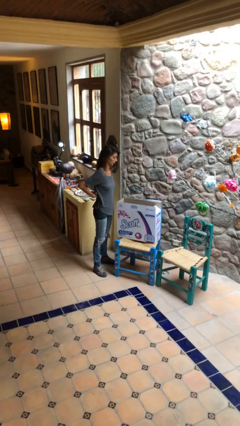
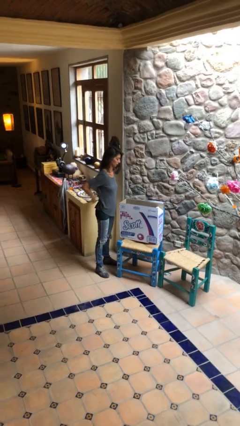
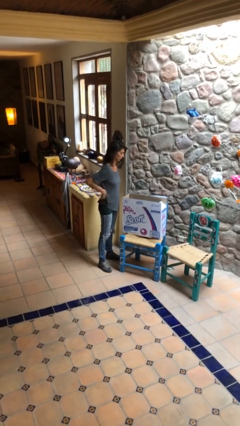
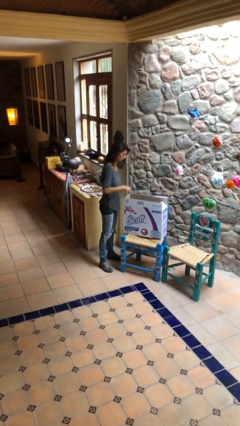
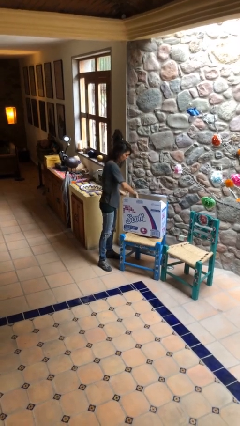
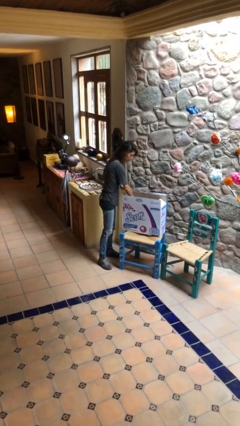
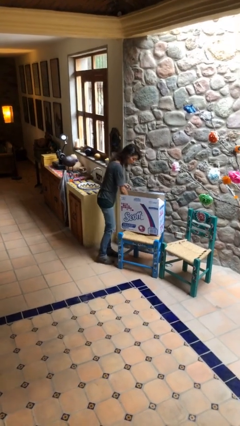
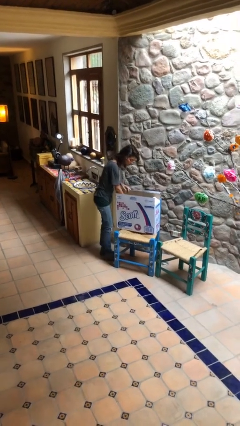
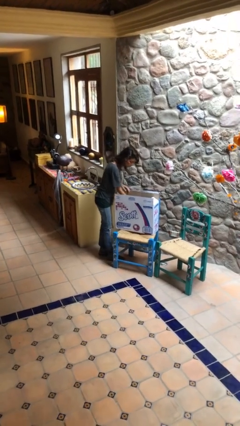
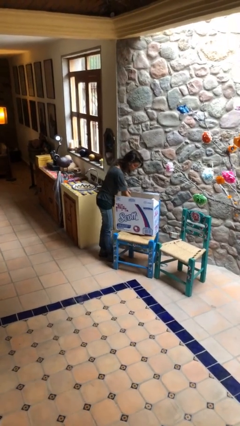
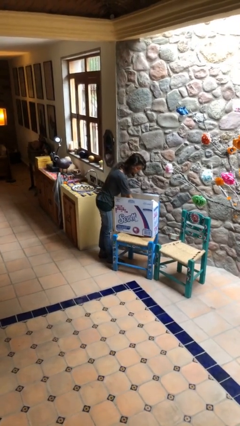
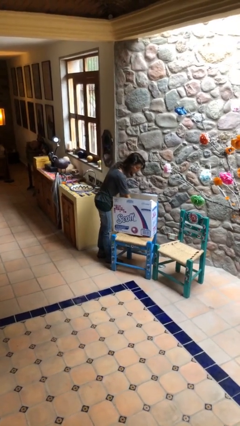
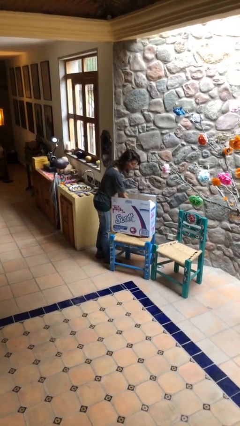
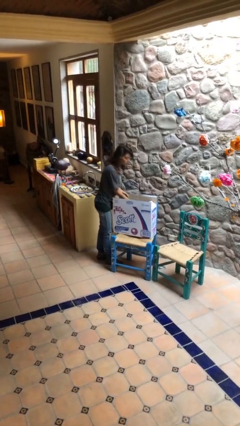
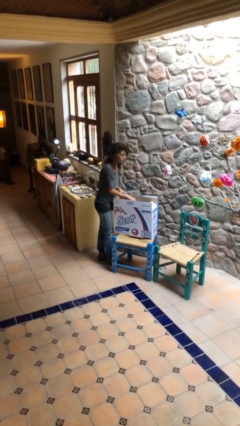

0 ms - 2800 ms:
person searches in box

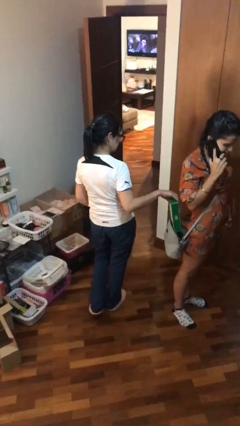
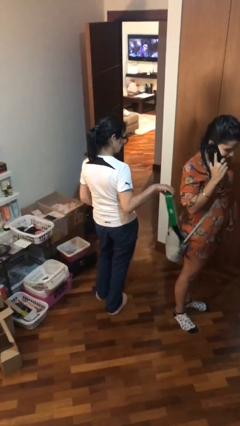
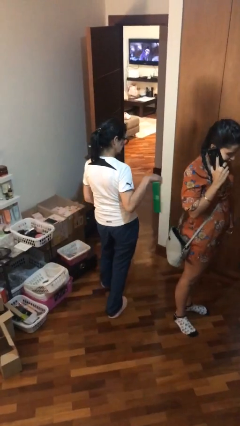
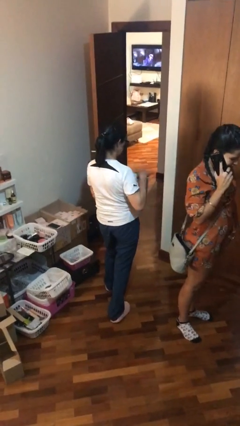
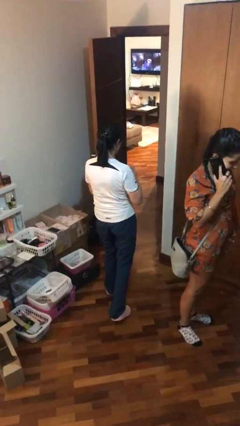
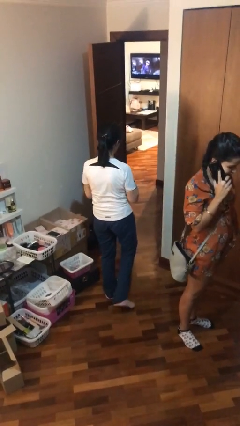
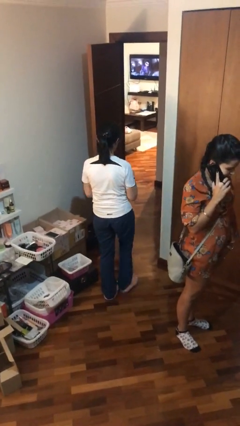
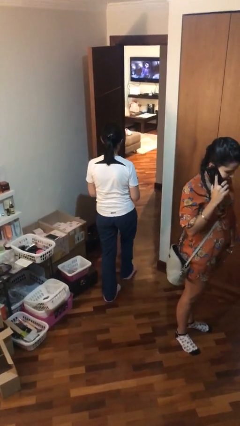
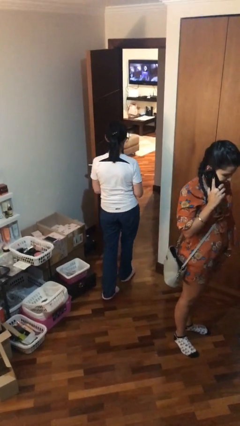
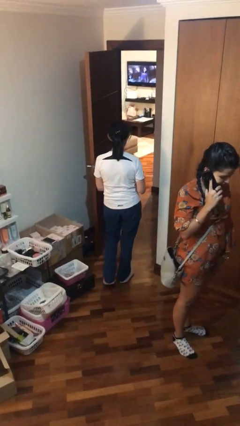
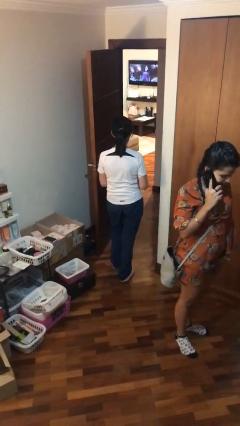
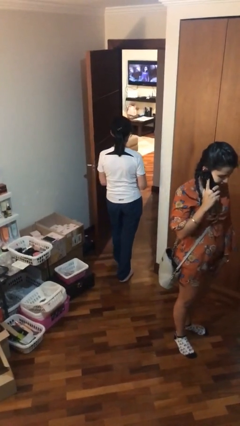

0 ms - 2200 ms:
person steals object from person

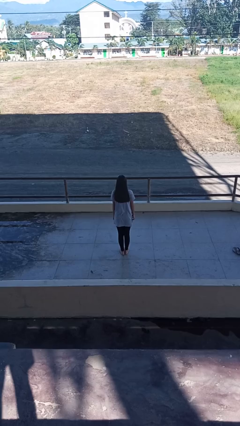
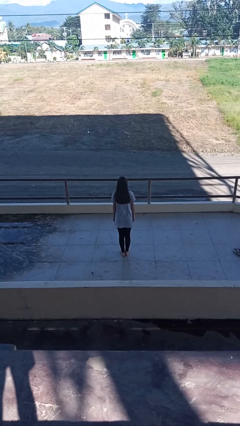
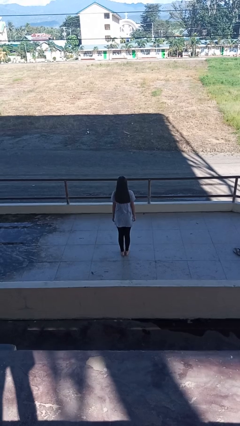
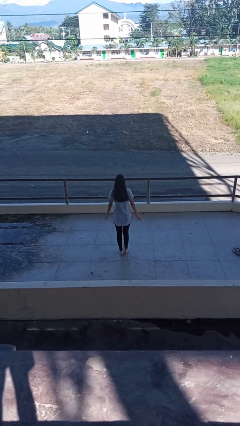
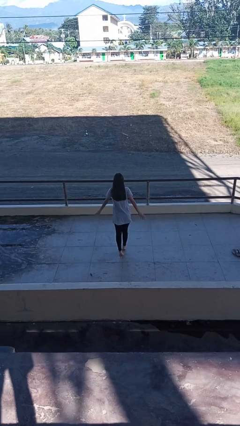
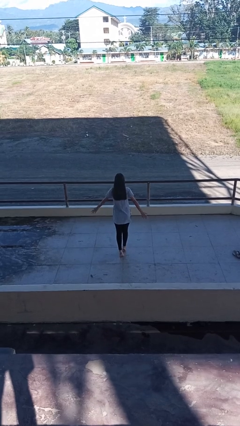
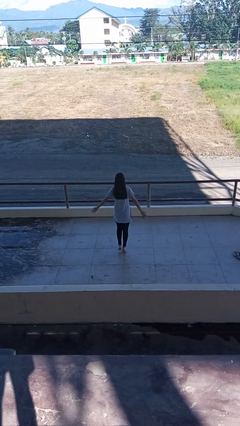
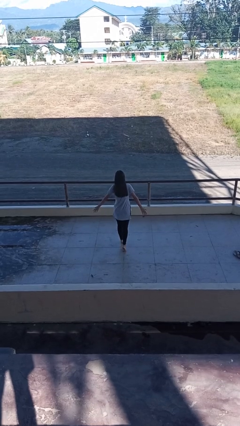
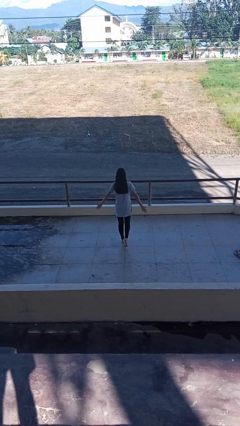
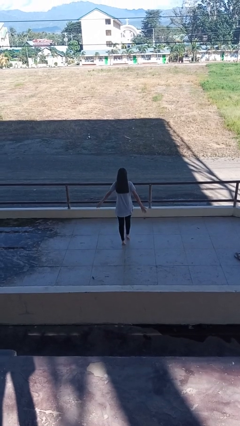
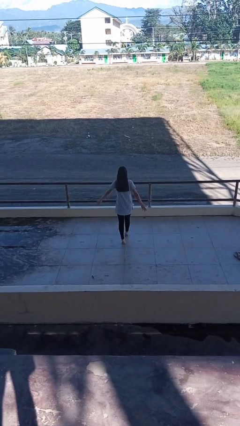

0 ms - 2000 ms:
person walks tiptoe

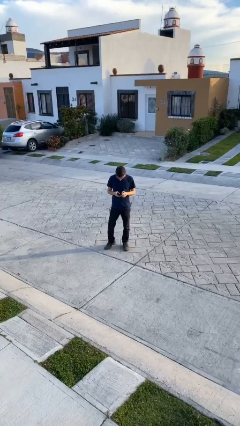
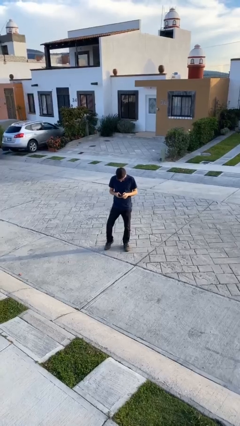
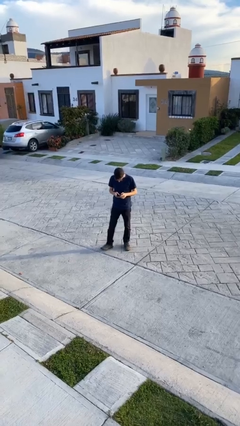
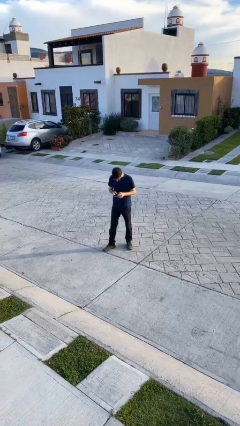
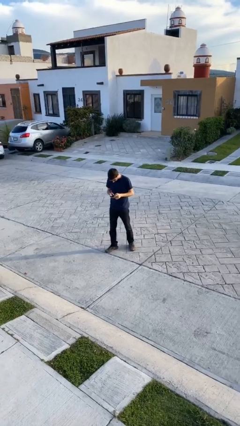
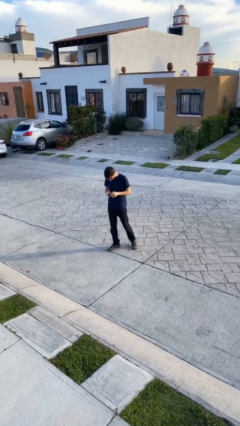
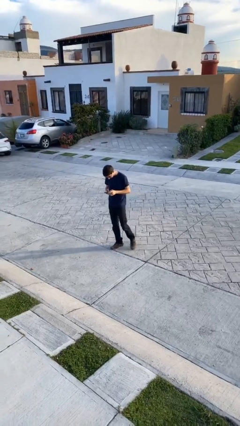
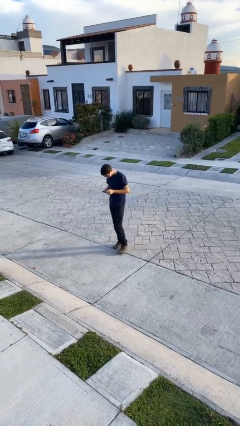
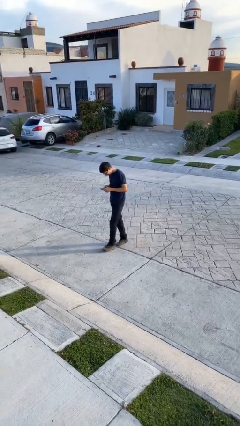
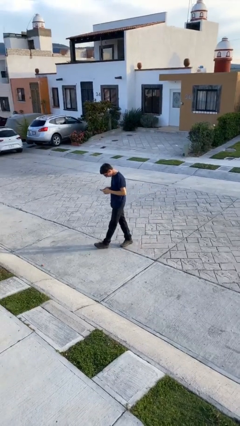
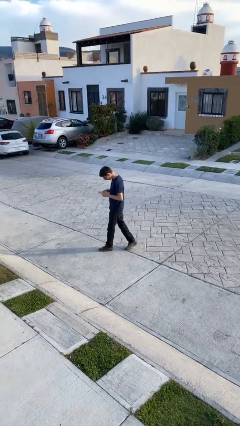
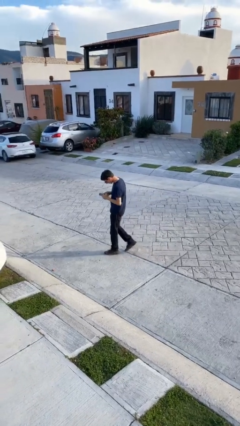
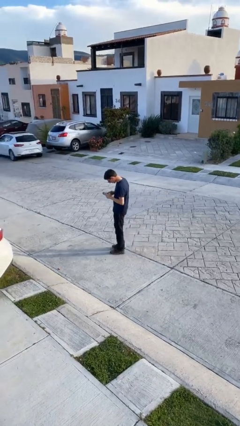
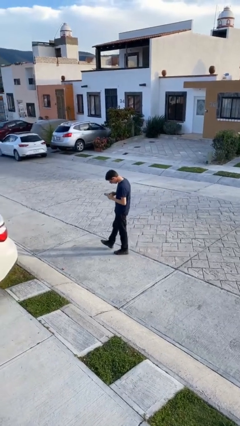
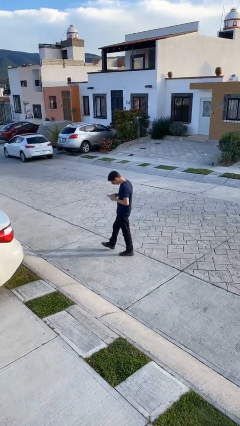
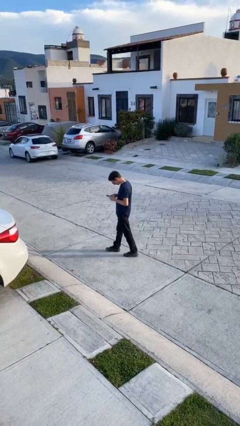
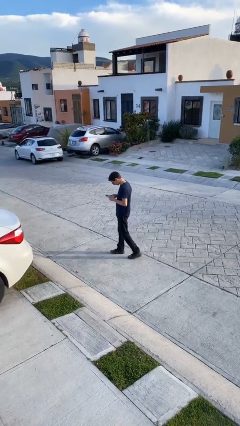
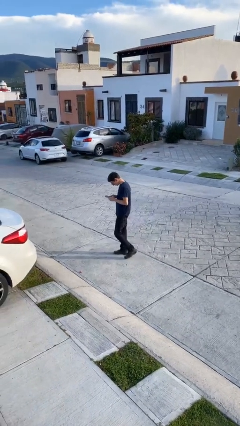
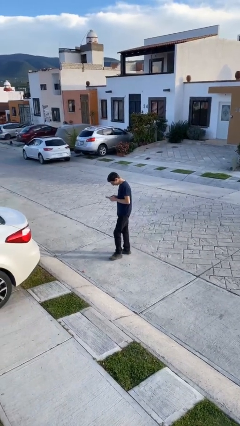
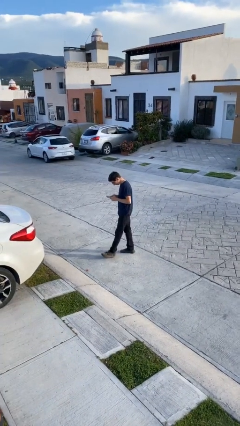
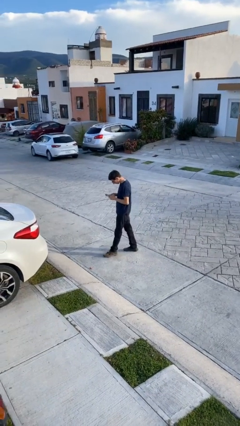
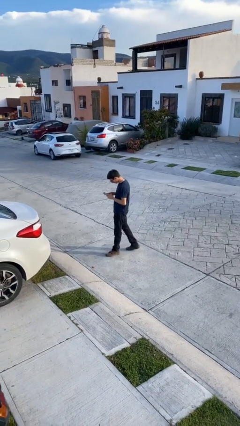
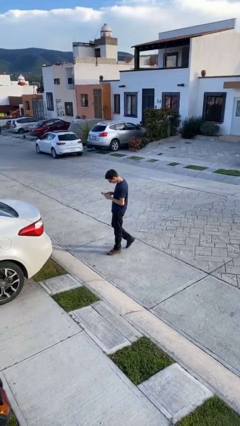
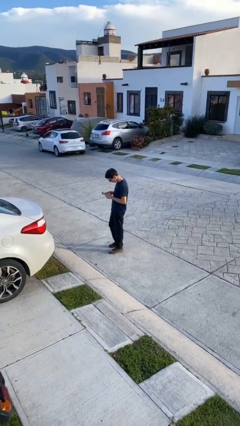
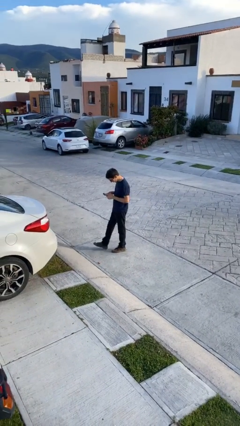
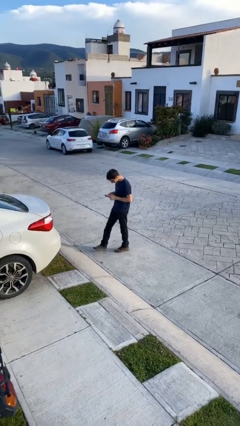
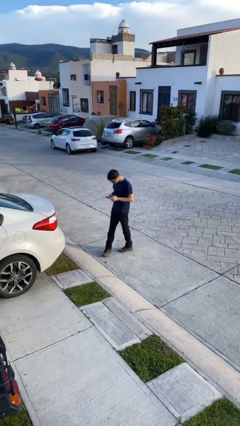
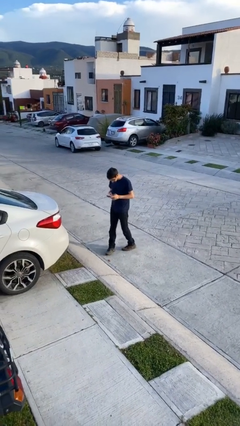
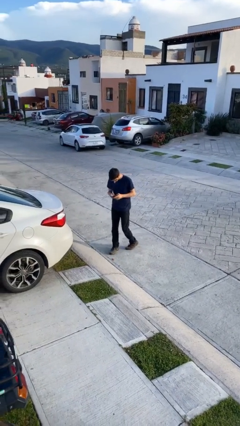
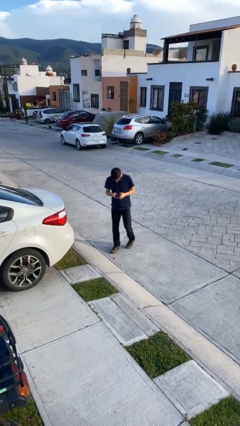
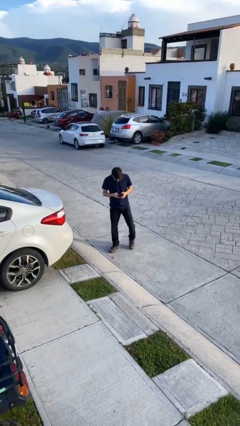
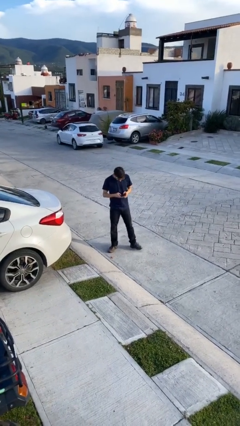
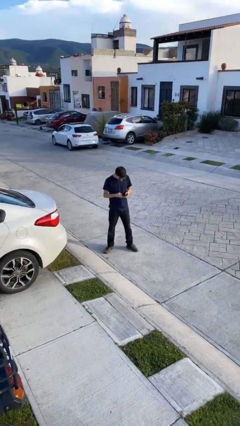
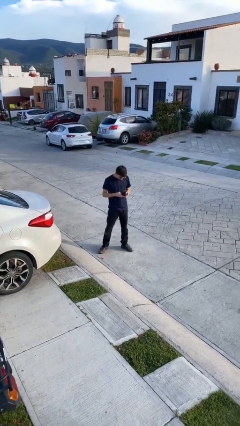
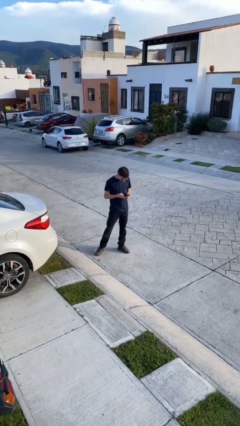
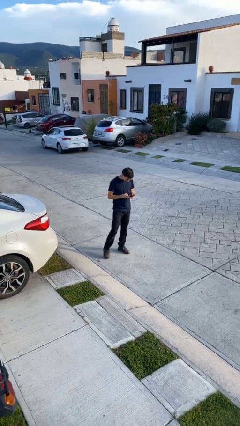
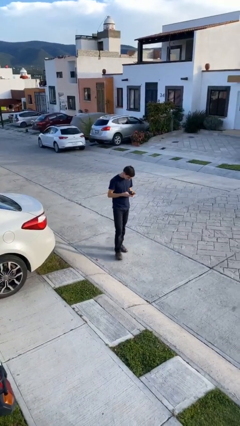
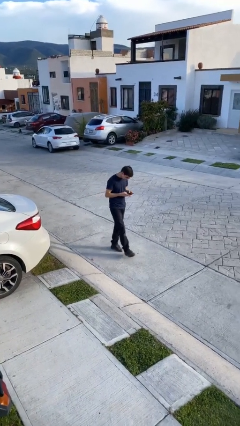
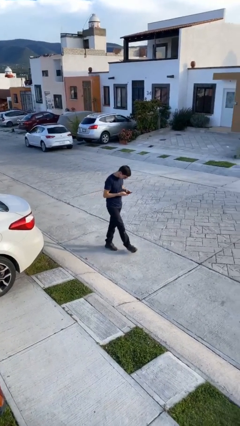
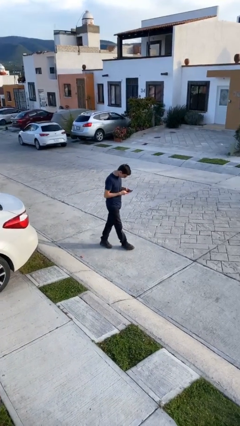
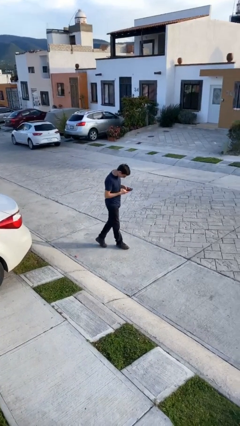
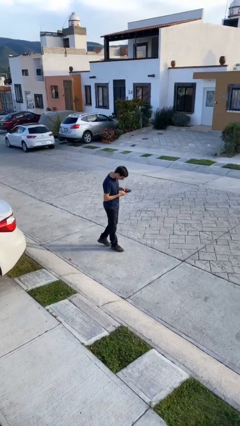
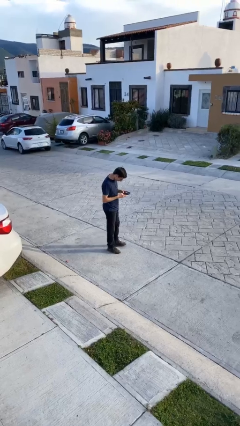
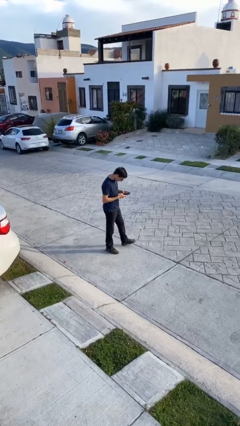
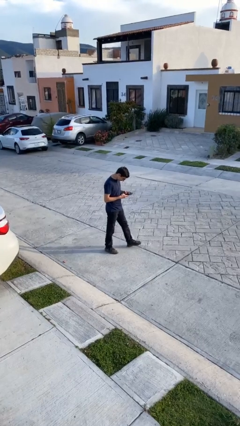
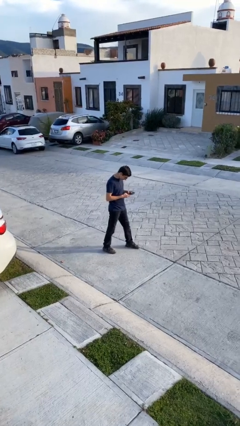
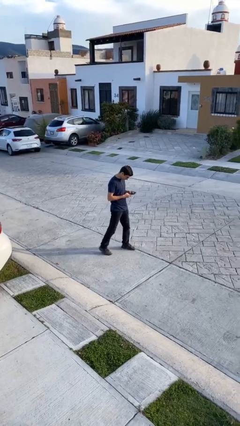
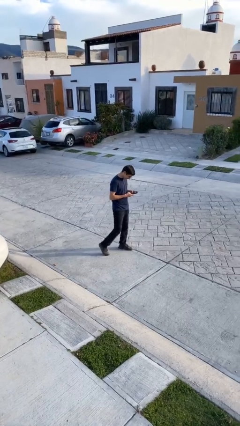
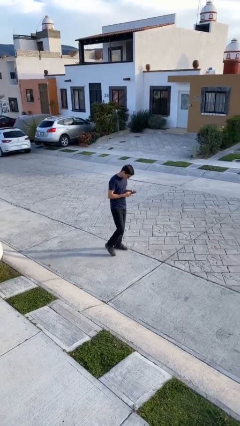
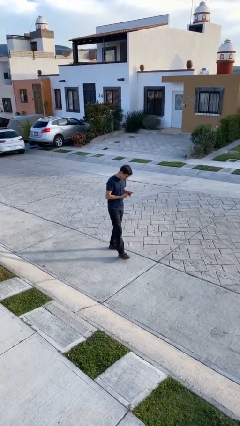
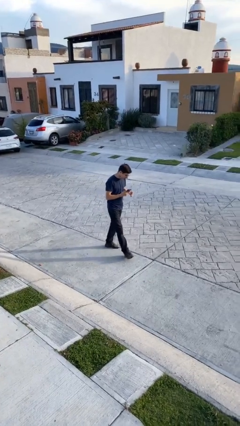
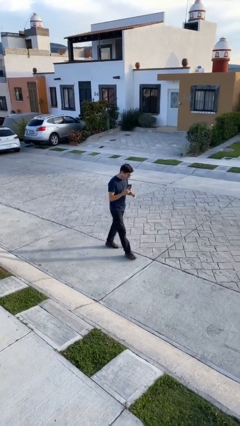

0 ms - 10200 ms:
person texts on phone

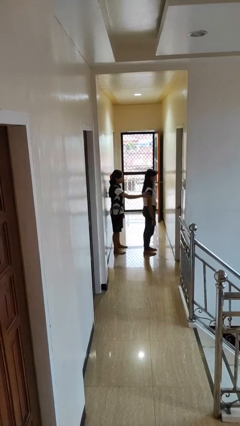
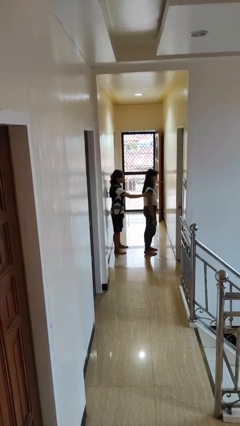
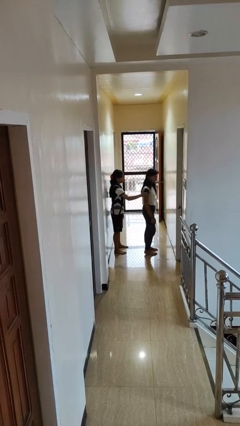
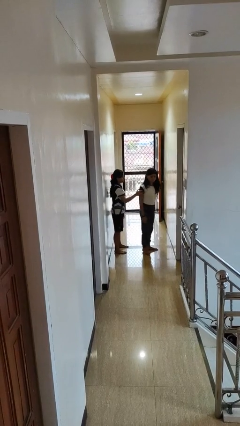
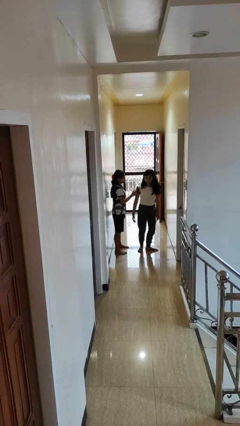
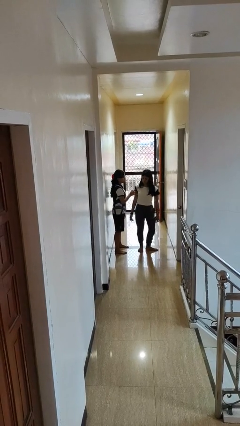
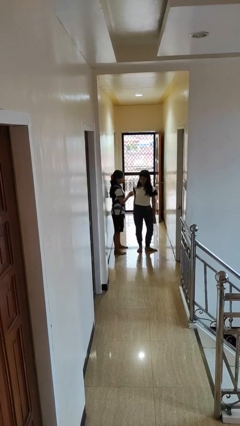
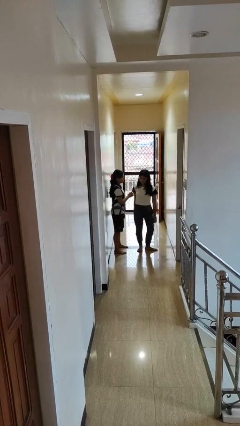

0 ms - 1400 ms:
person spins person around
